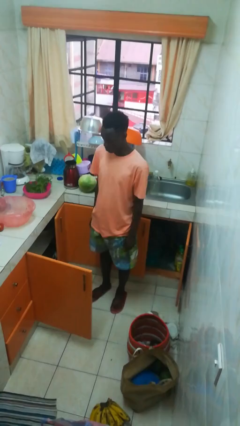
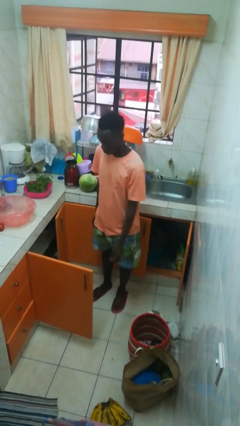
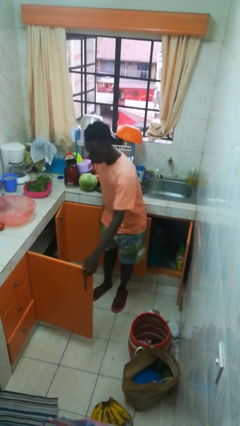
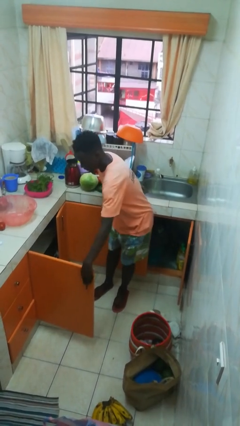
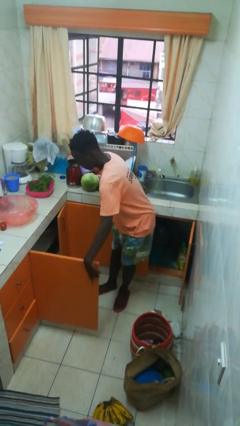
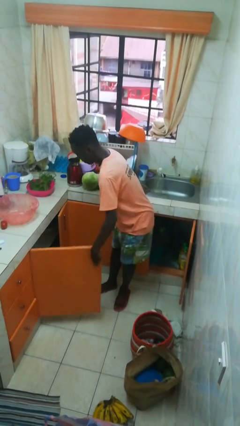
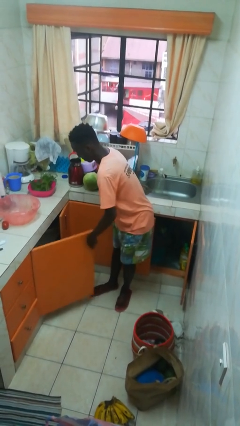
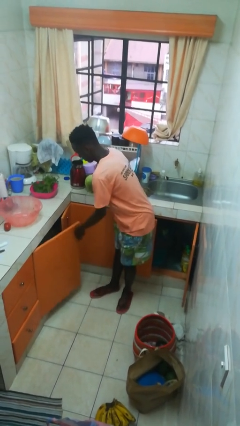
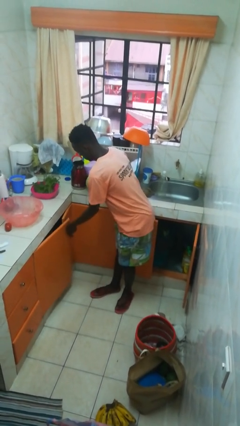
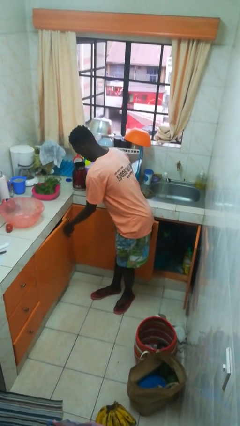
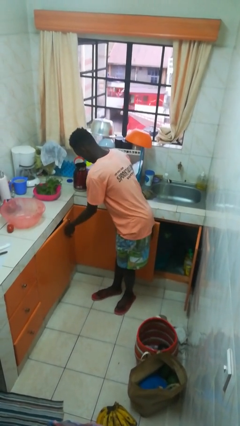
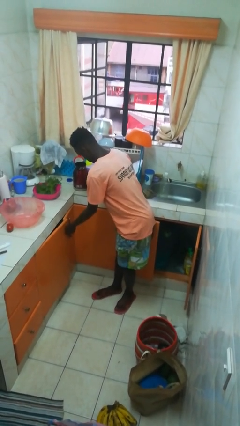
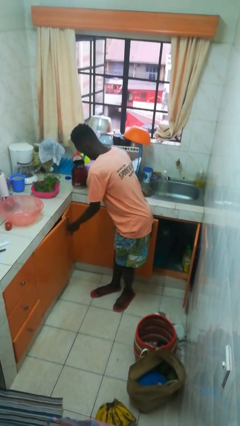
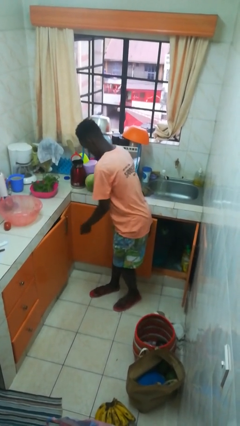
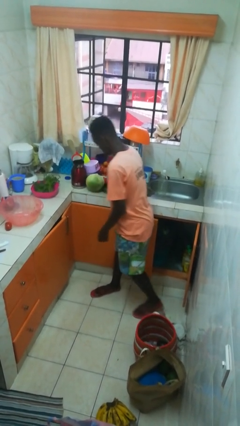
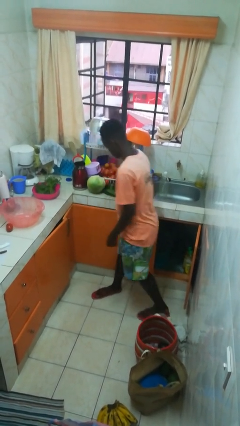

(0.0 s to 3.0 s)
person closes cabinet

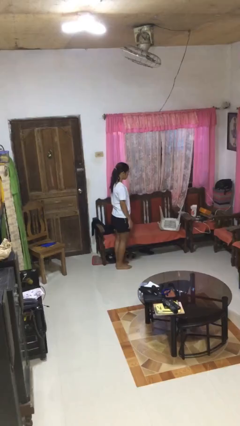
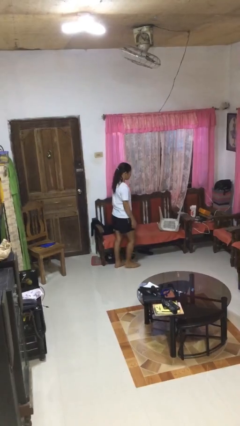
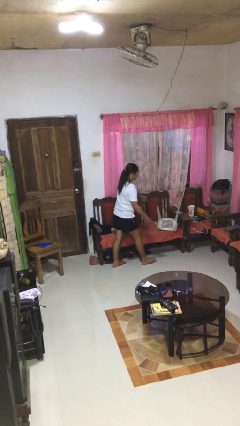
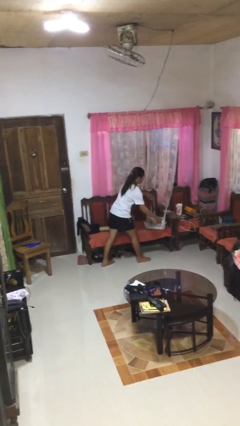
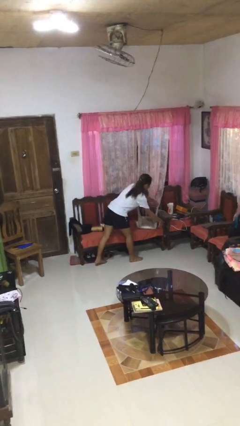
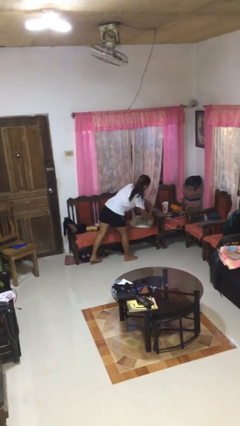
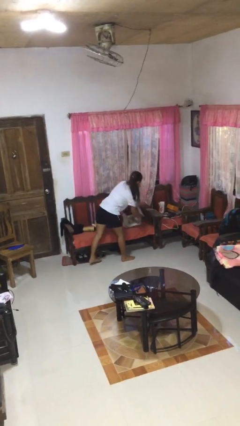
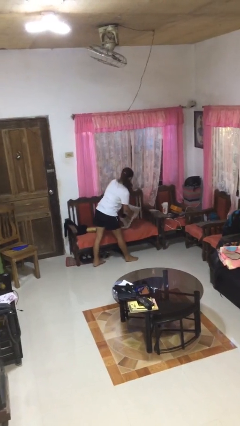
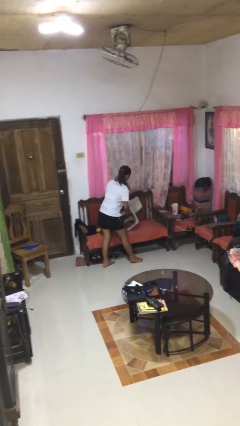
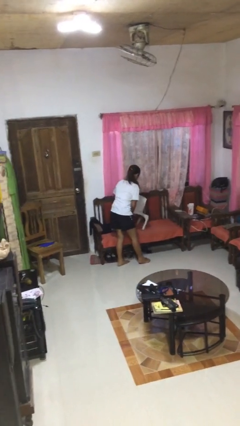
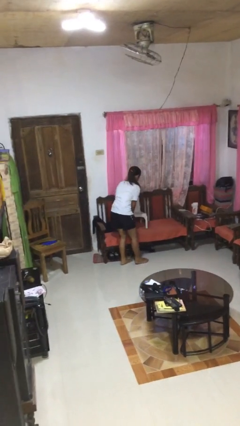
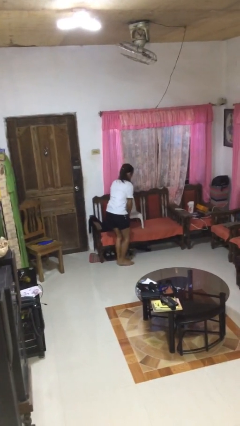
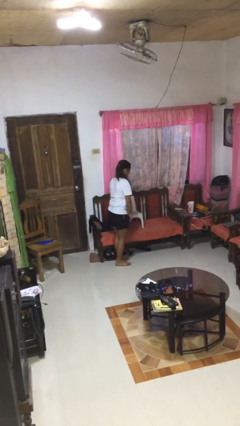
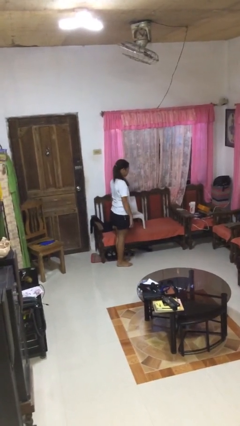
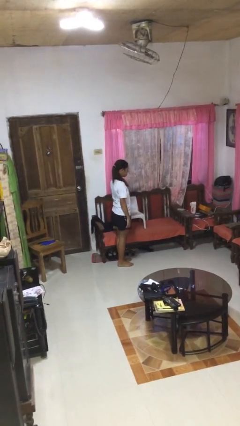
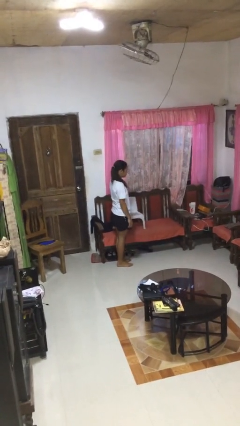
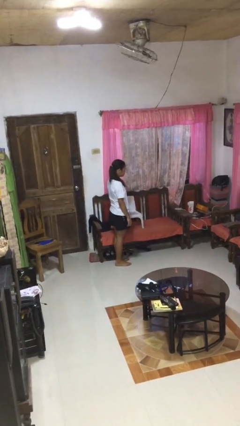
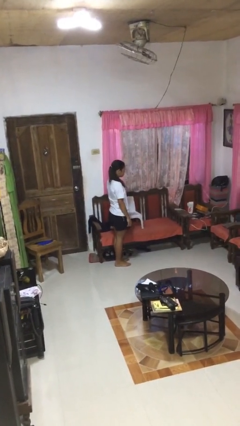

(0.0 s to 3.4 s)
person sets upright furniture

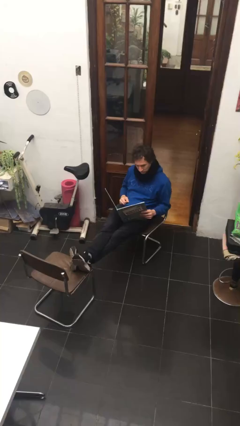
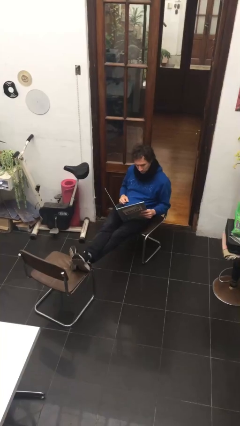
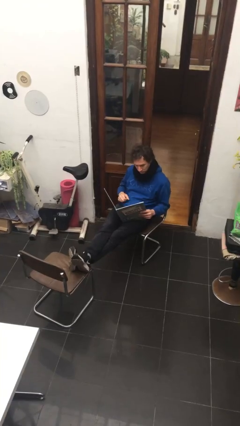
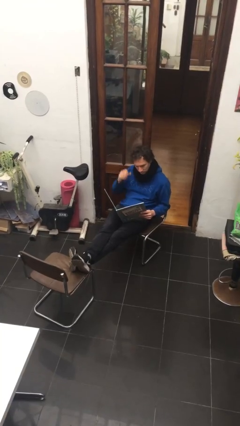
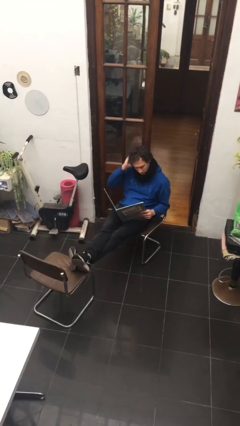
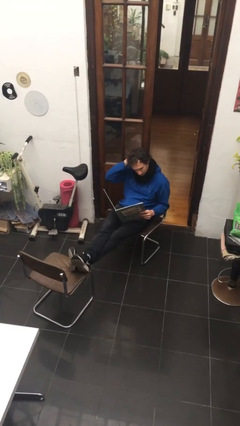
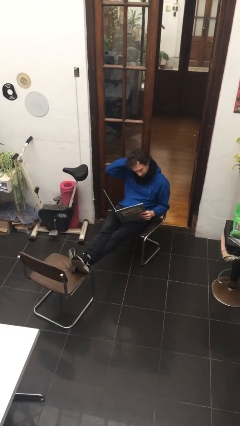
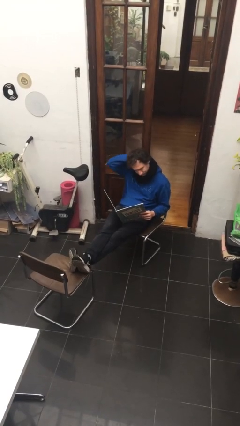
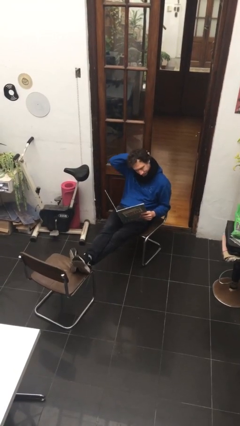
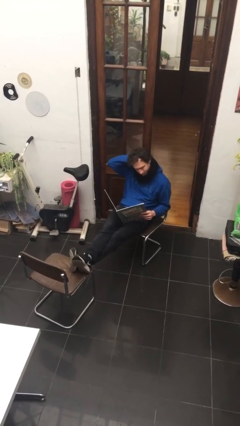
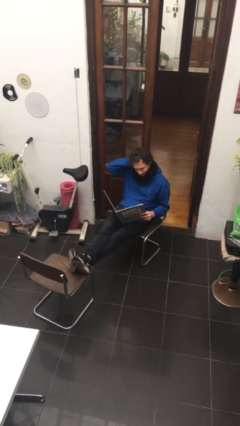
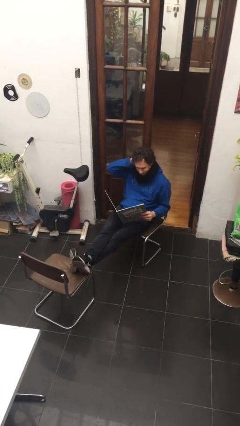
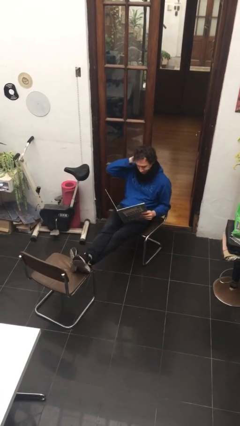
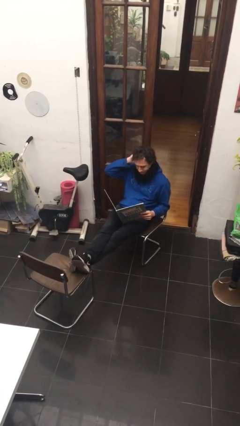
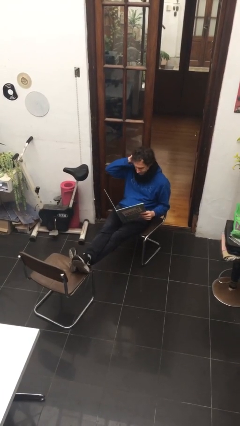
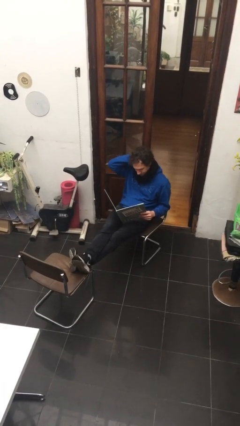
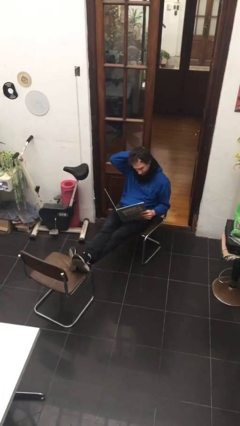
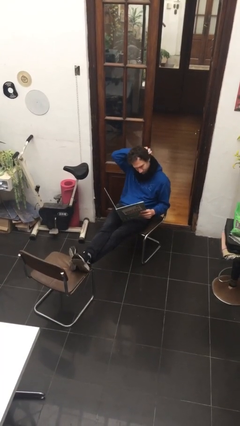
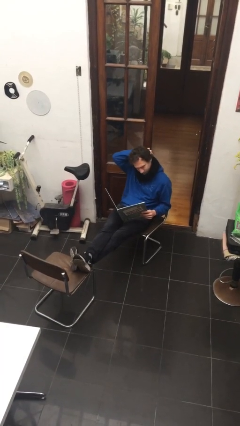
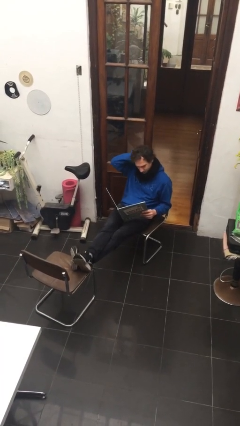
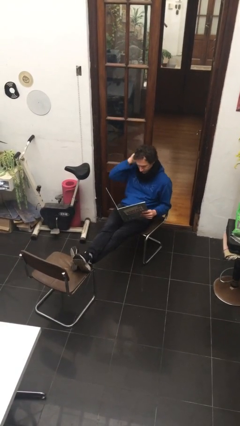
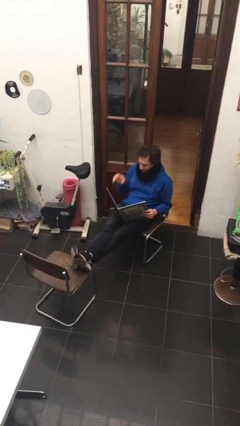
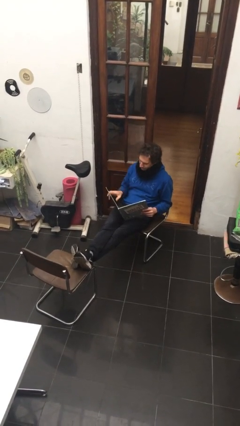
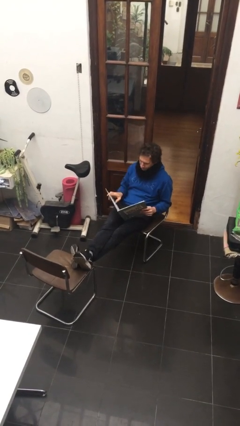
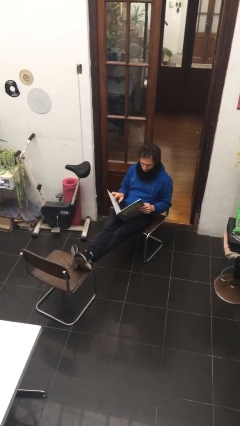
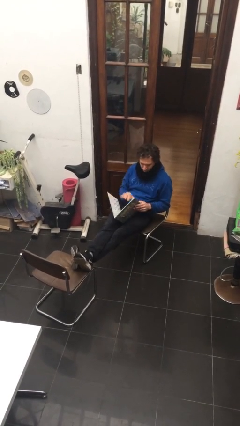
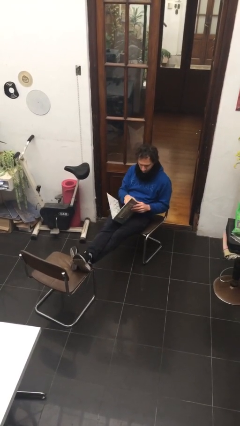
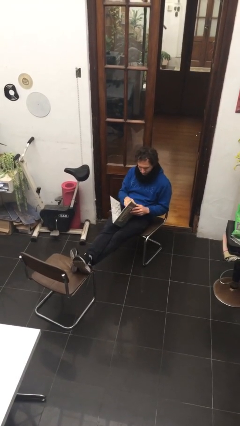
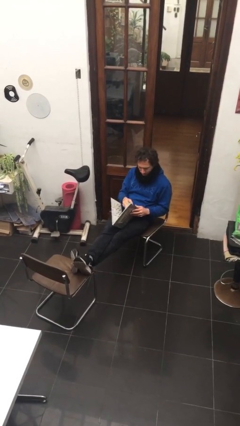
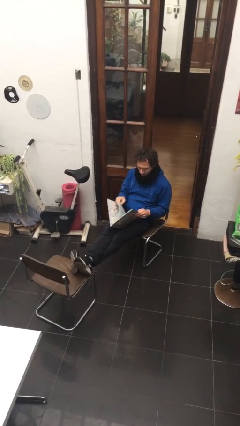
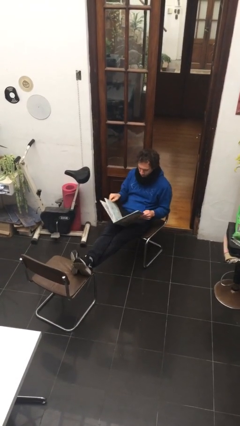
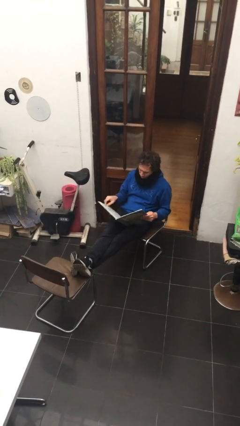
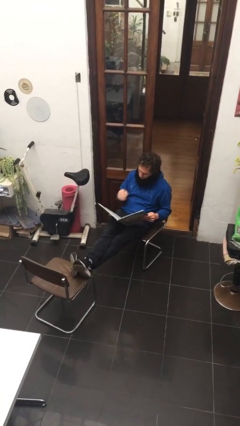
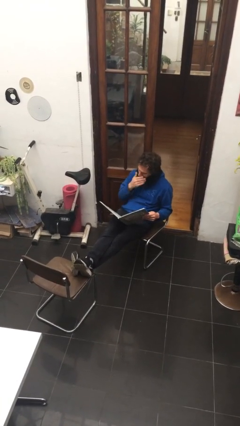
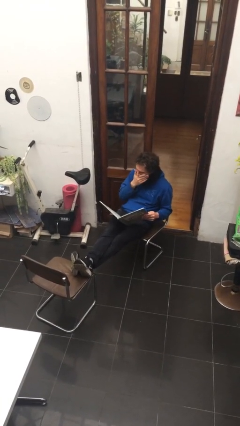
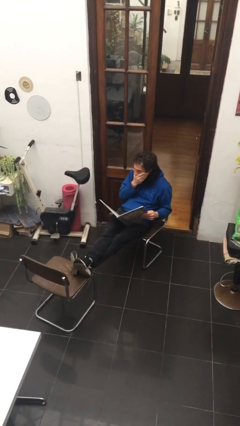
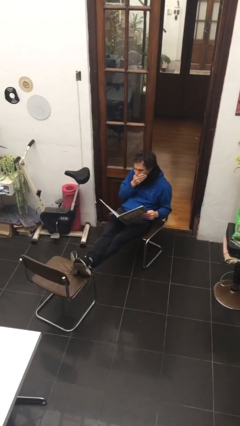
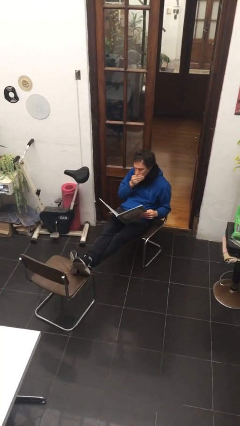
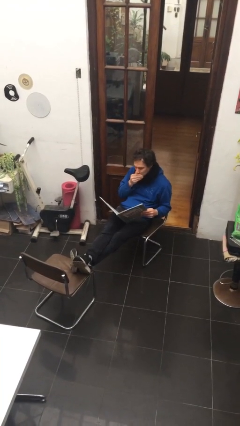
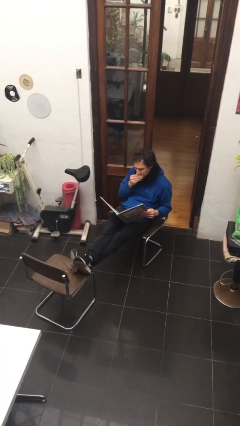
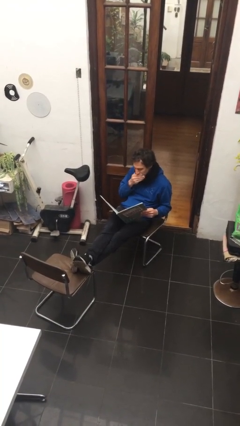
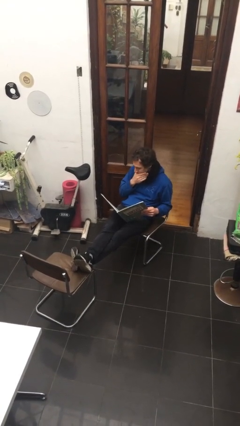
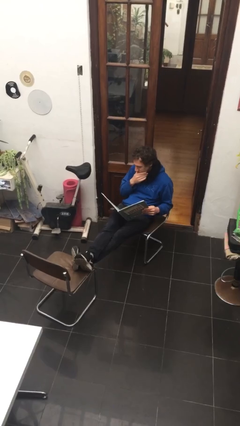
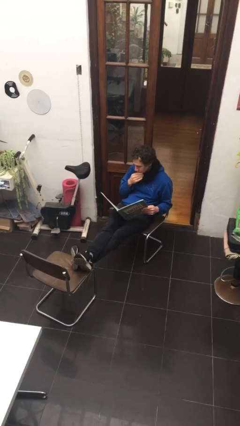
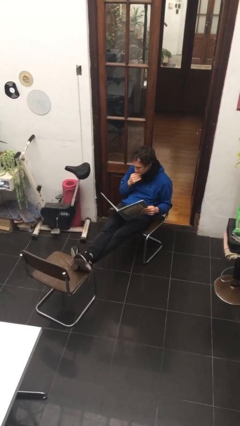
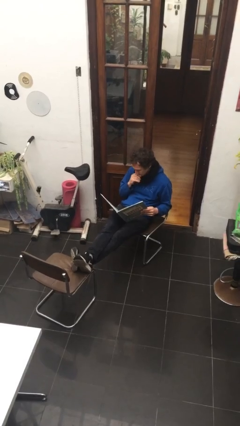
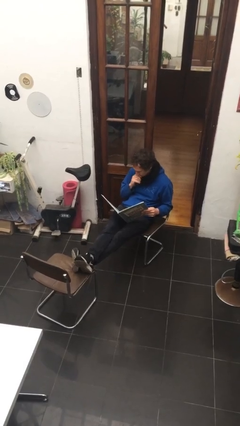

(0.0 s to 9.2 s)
person reads document

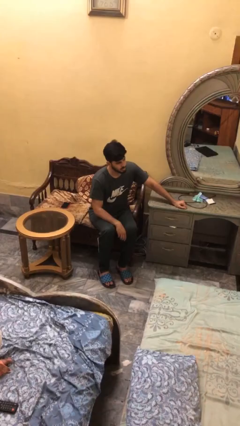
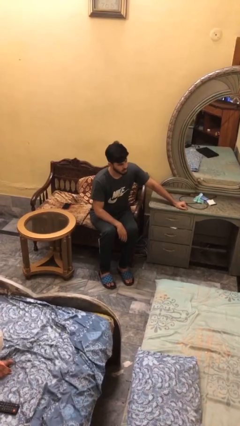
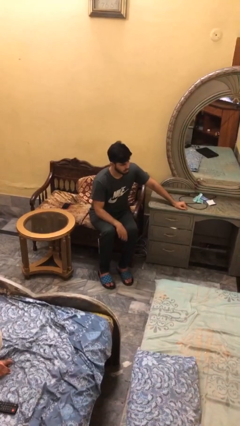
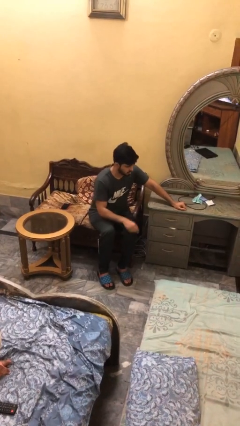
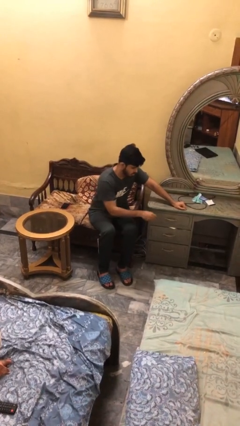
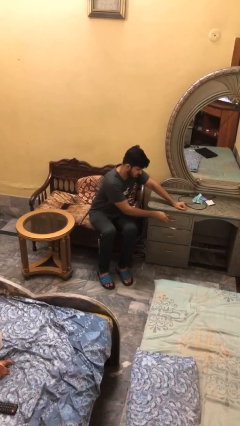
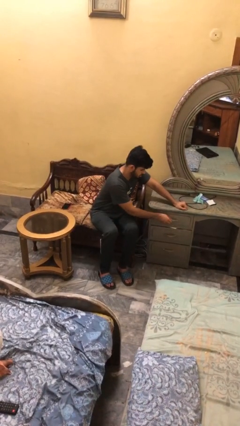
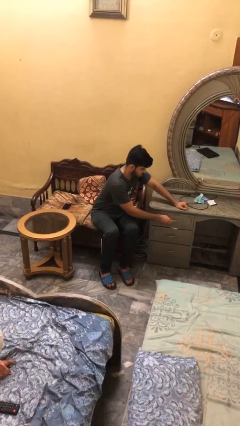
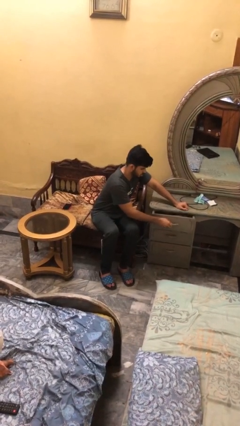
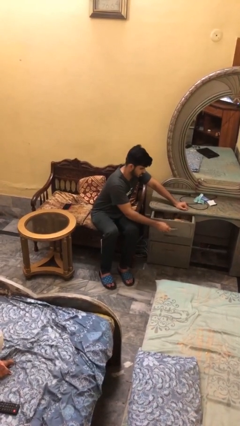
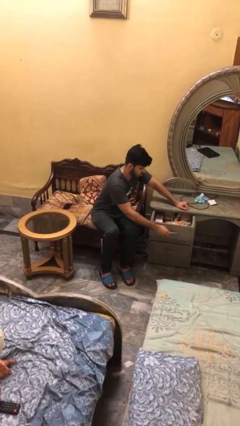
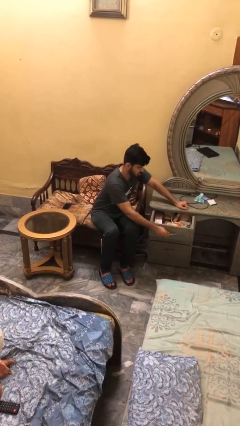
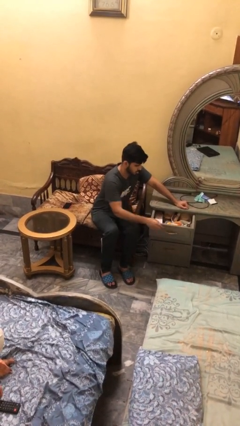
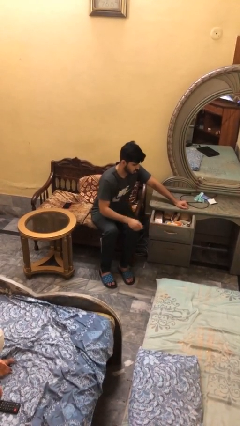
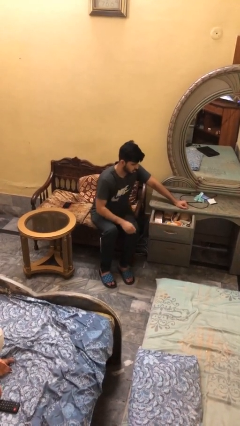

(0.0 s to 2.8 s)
person opens dresser drawer
